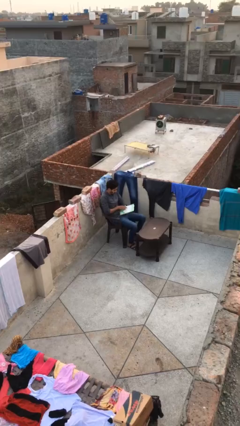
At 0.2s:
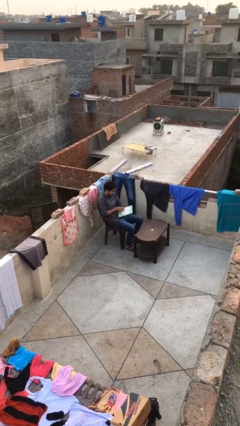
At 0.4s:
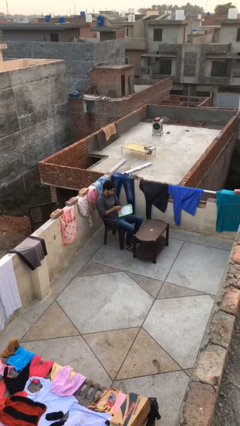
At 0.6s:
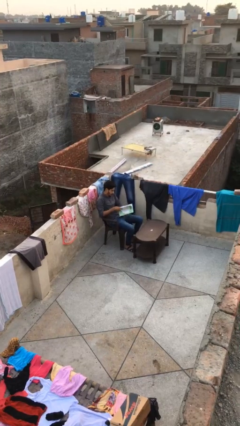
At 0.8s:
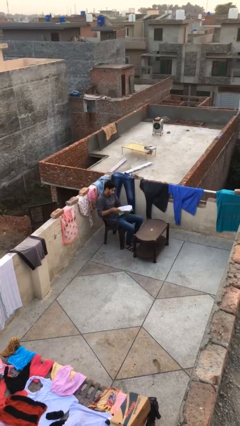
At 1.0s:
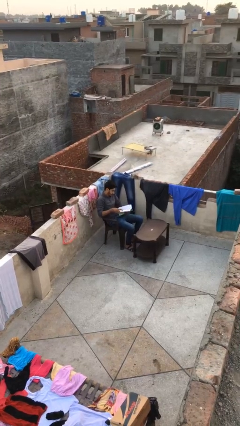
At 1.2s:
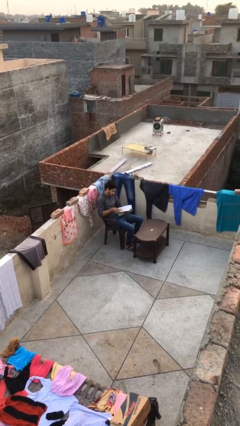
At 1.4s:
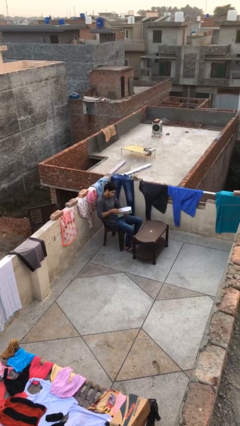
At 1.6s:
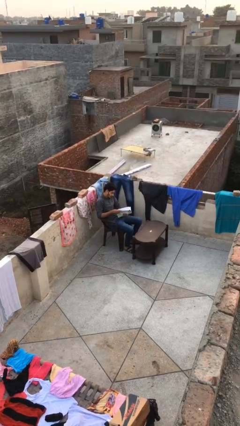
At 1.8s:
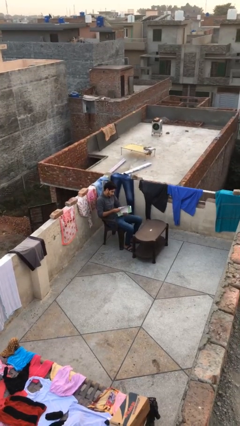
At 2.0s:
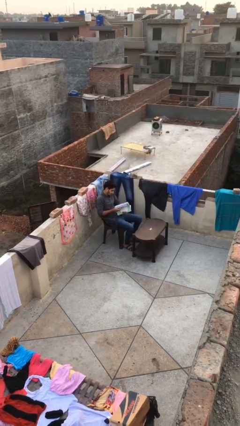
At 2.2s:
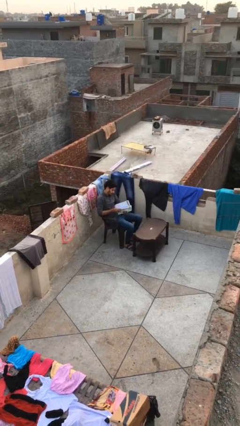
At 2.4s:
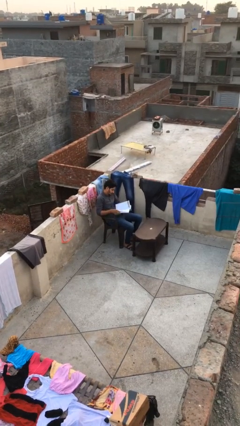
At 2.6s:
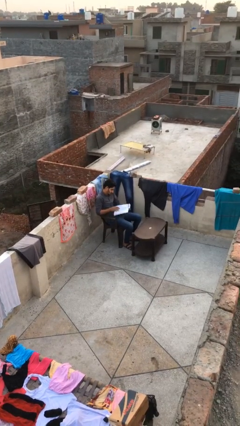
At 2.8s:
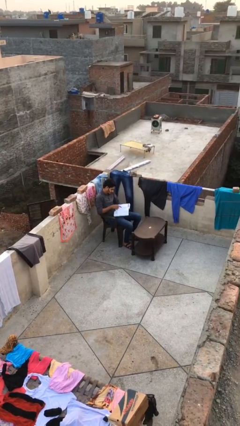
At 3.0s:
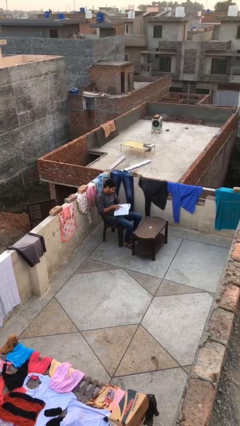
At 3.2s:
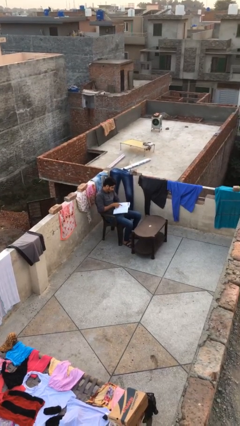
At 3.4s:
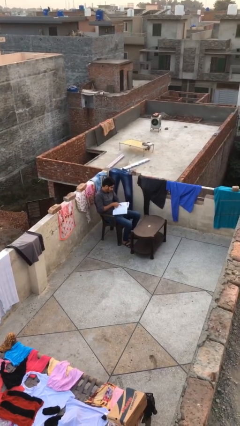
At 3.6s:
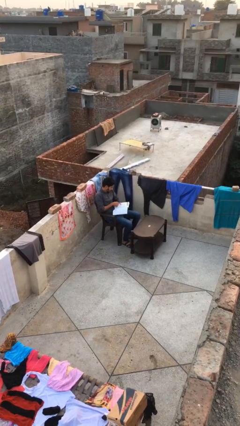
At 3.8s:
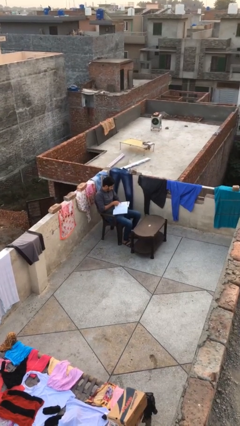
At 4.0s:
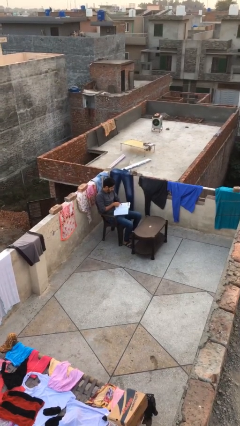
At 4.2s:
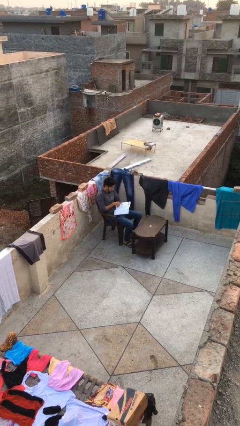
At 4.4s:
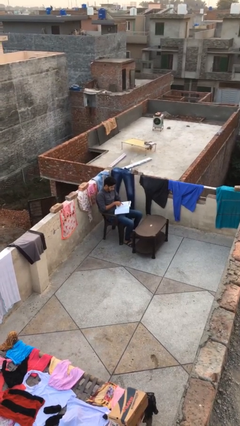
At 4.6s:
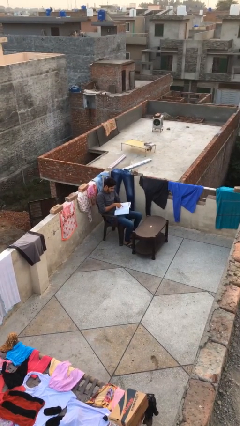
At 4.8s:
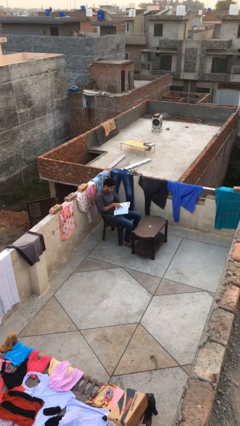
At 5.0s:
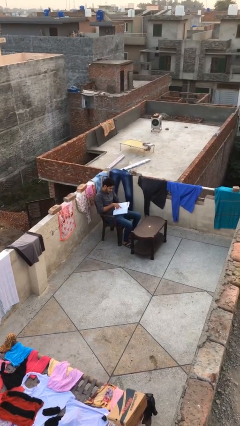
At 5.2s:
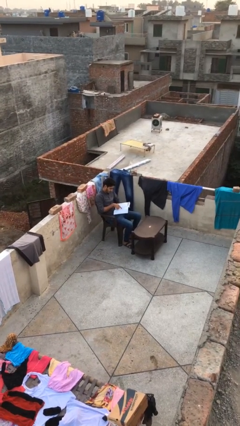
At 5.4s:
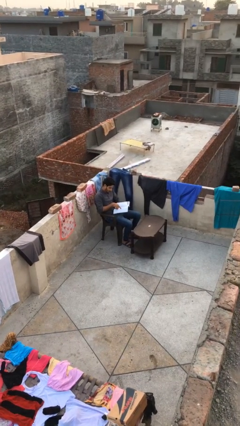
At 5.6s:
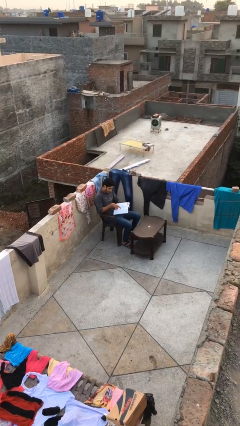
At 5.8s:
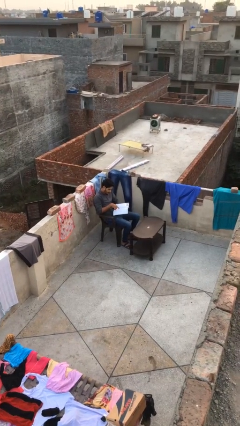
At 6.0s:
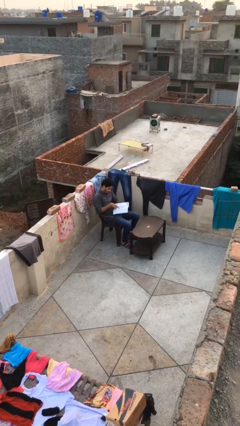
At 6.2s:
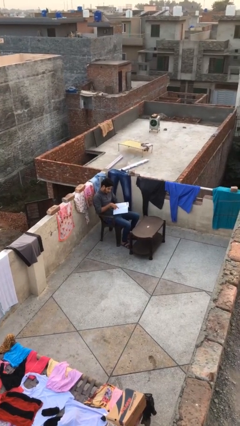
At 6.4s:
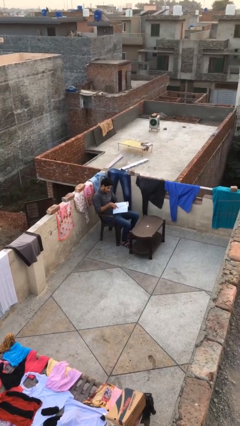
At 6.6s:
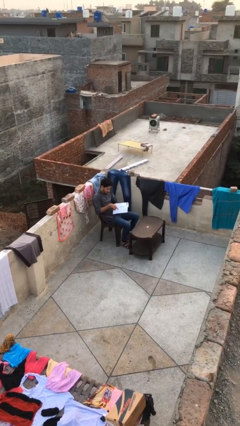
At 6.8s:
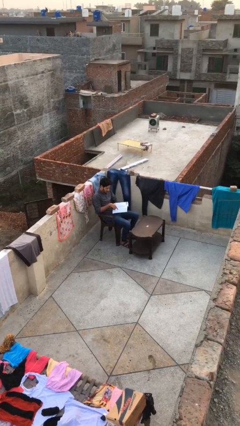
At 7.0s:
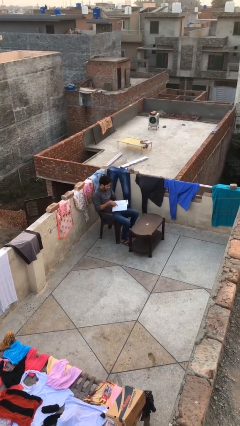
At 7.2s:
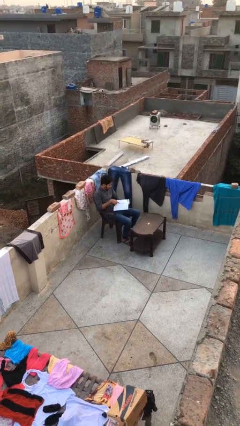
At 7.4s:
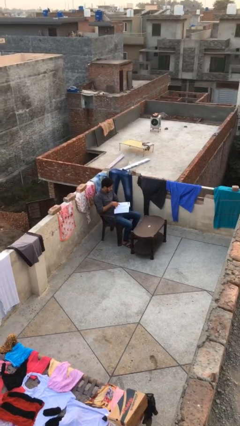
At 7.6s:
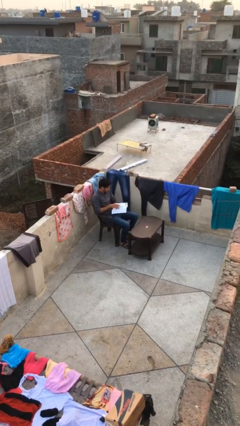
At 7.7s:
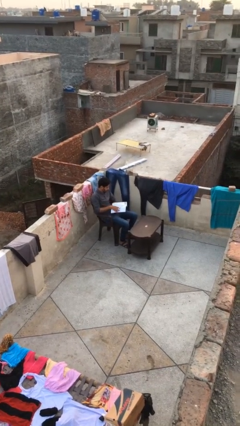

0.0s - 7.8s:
person reads document

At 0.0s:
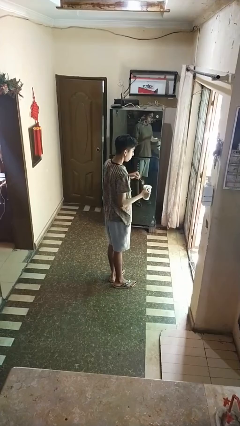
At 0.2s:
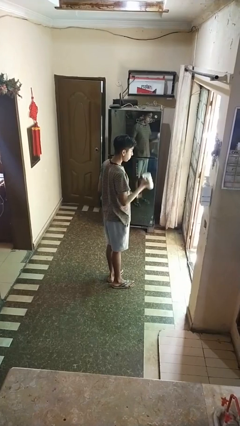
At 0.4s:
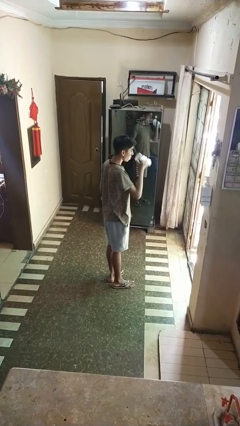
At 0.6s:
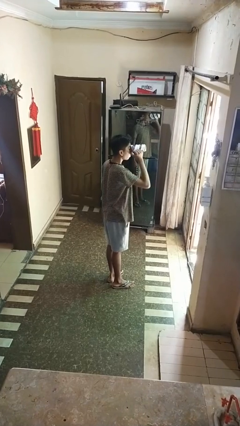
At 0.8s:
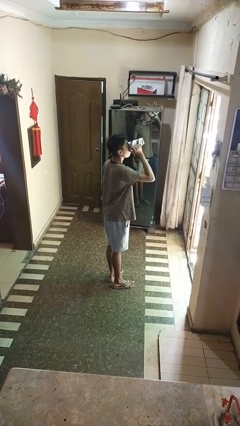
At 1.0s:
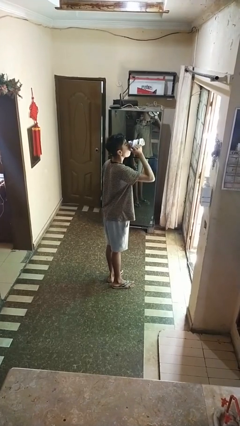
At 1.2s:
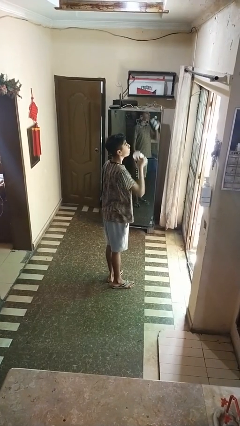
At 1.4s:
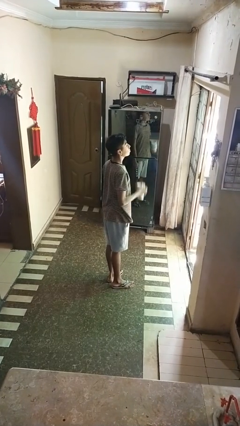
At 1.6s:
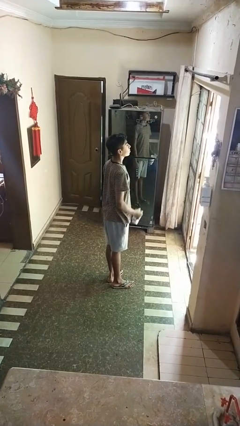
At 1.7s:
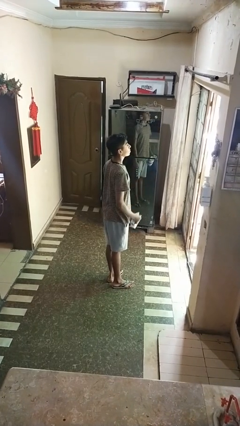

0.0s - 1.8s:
person drinks from mug

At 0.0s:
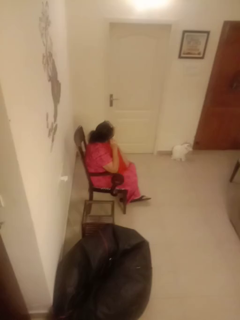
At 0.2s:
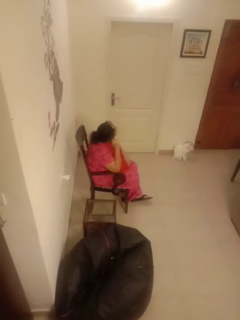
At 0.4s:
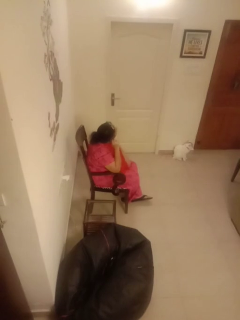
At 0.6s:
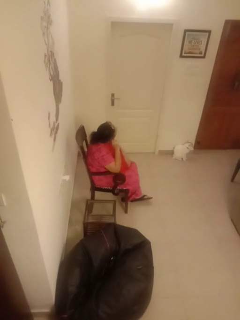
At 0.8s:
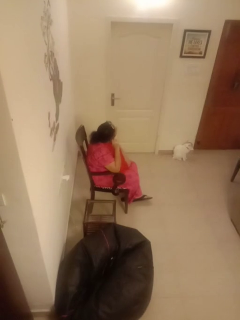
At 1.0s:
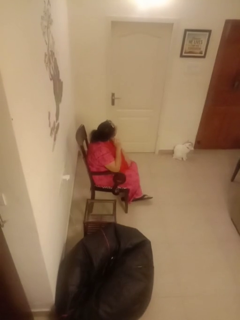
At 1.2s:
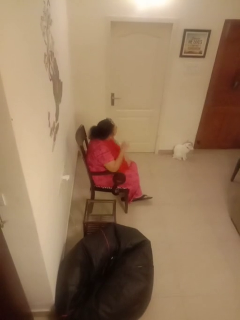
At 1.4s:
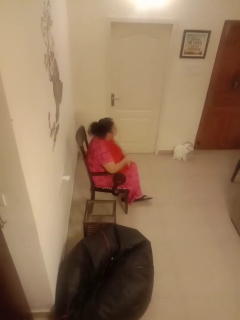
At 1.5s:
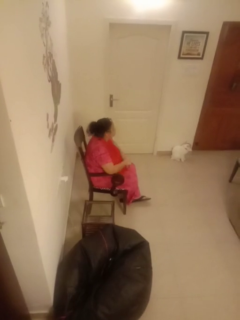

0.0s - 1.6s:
person touches earlobe

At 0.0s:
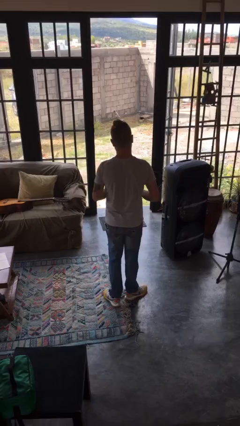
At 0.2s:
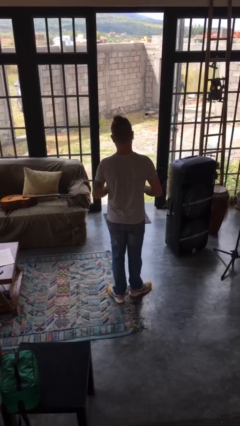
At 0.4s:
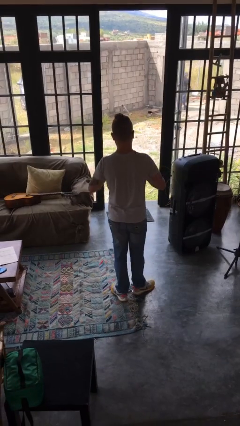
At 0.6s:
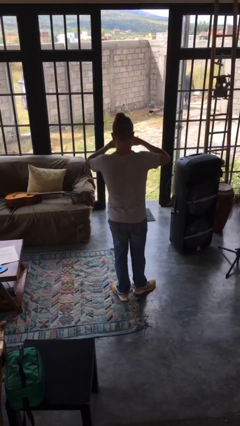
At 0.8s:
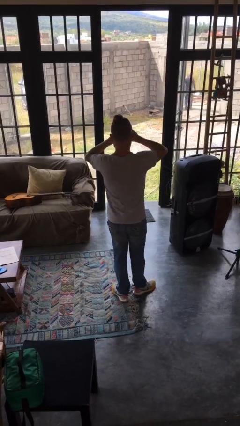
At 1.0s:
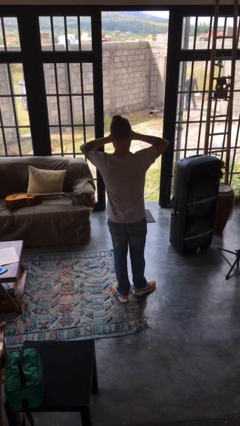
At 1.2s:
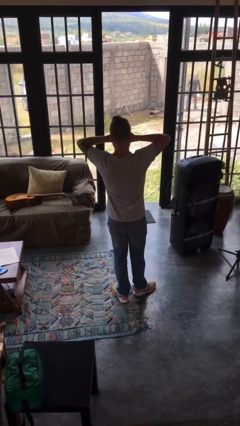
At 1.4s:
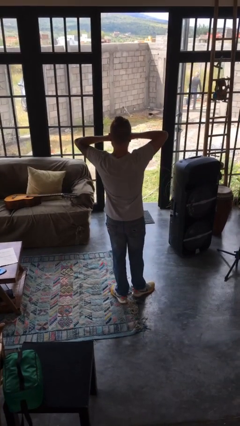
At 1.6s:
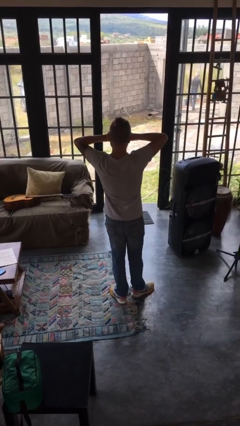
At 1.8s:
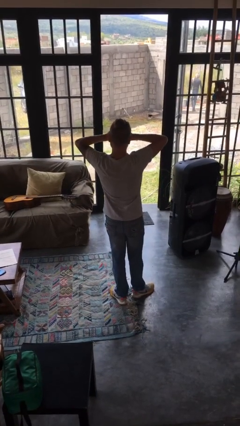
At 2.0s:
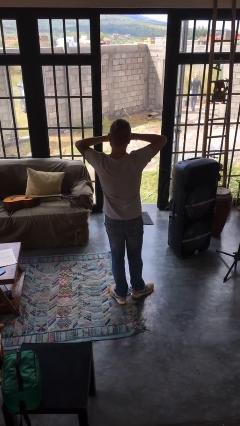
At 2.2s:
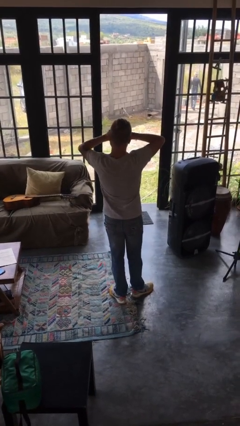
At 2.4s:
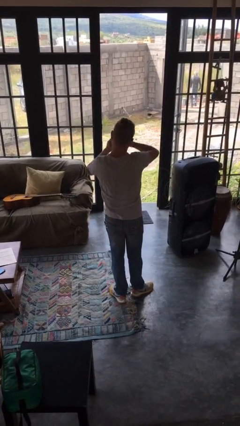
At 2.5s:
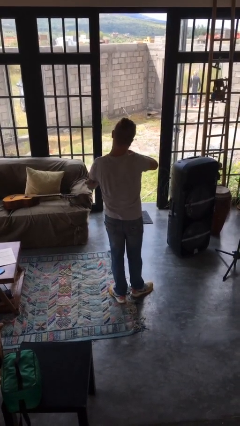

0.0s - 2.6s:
person rubs eyes

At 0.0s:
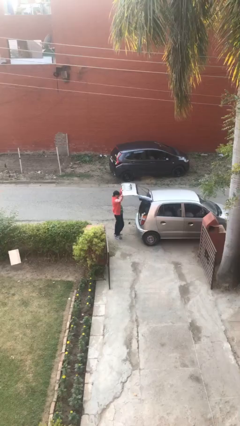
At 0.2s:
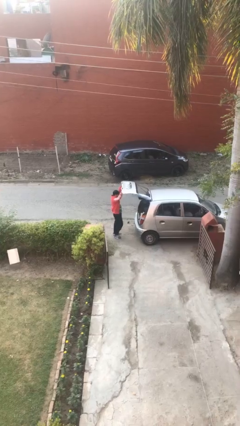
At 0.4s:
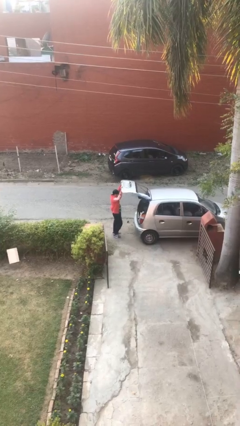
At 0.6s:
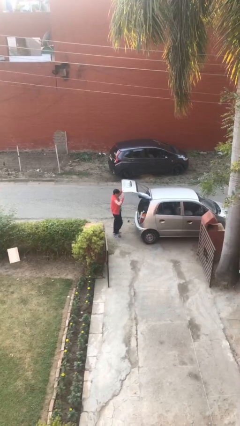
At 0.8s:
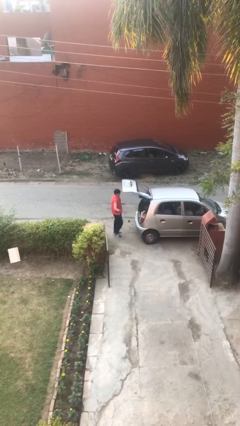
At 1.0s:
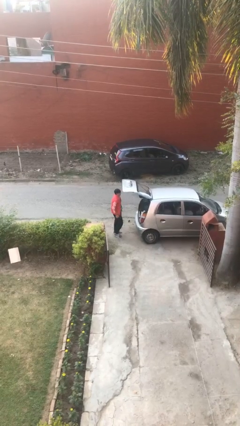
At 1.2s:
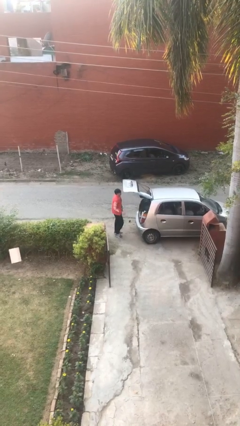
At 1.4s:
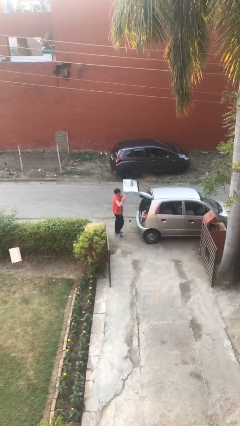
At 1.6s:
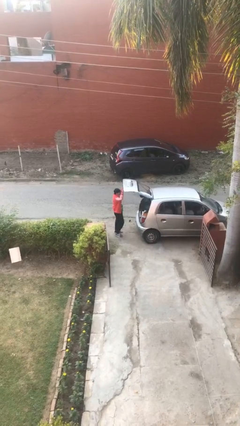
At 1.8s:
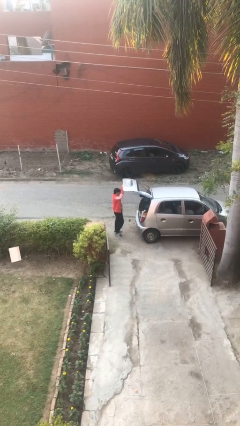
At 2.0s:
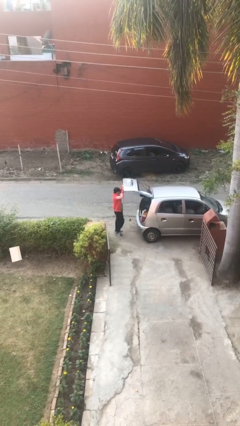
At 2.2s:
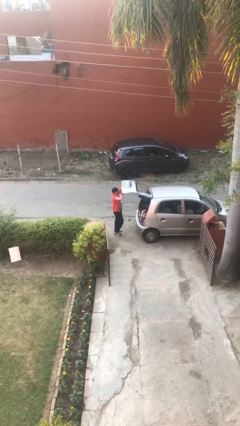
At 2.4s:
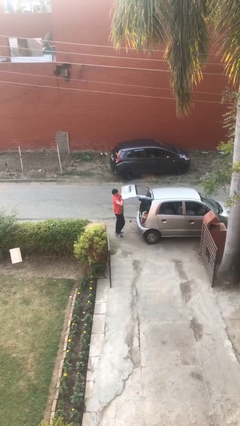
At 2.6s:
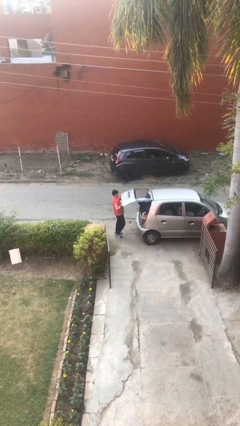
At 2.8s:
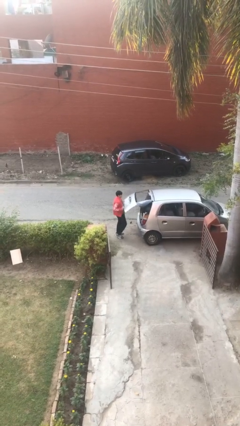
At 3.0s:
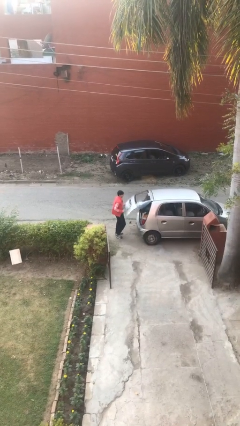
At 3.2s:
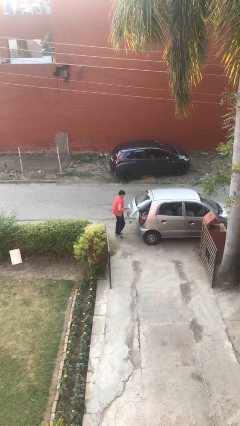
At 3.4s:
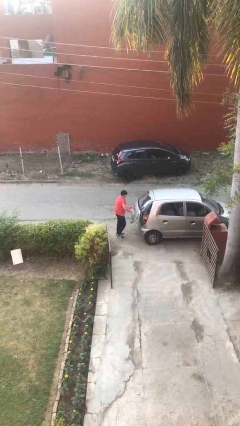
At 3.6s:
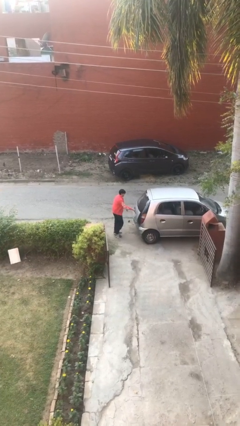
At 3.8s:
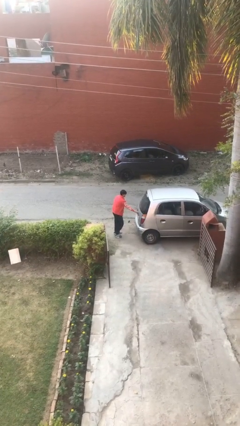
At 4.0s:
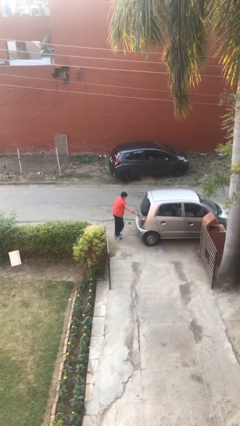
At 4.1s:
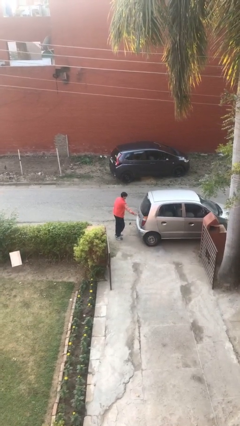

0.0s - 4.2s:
person closes car trunk
